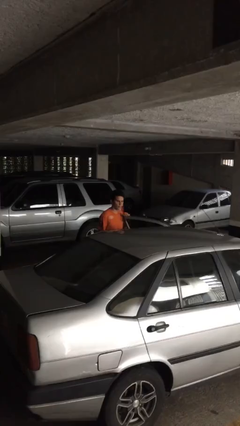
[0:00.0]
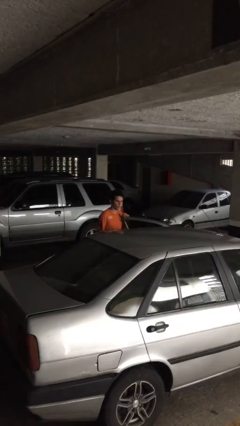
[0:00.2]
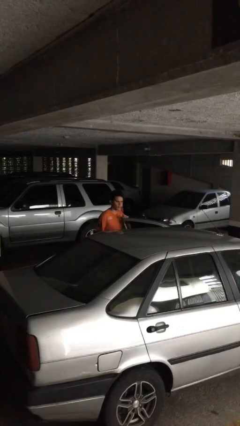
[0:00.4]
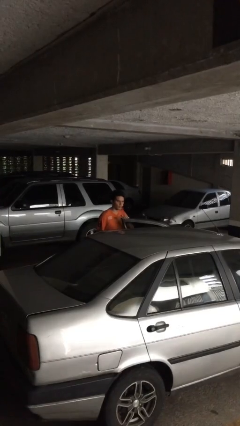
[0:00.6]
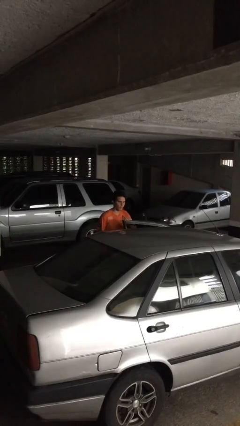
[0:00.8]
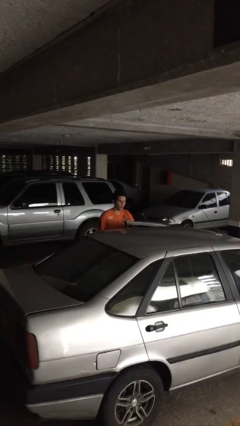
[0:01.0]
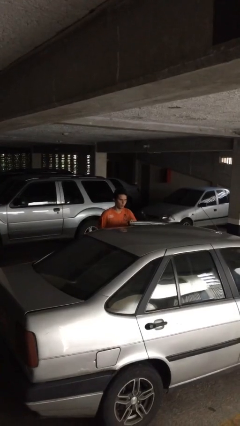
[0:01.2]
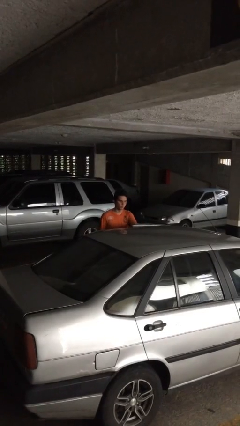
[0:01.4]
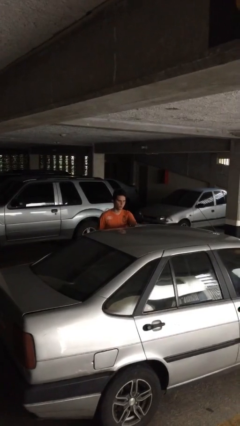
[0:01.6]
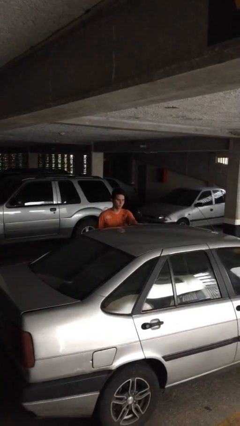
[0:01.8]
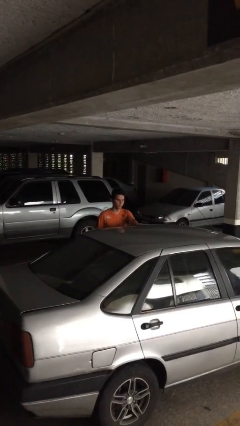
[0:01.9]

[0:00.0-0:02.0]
person closes car door

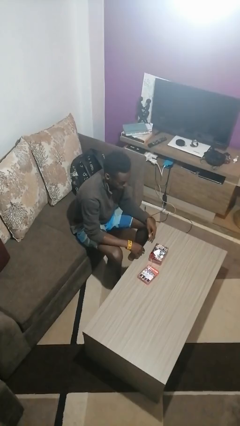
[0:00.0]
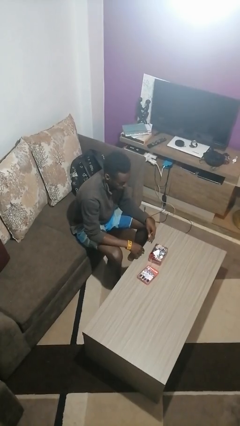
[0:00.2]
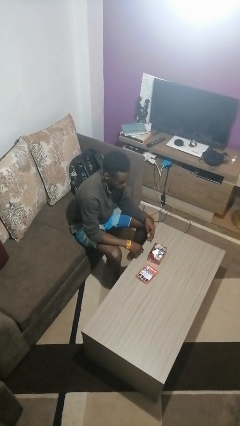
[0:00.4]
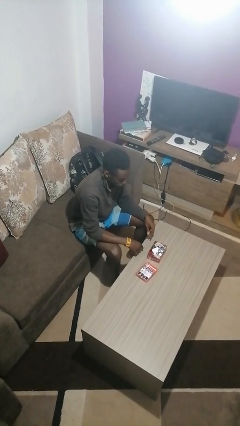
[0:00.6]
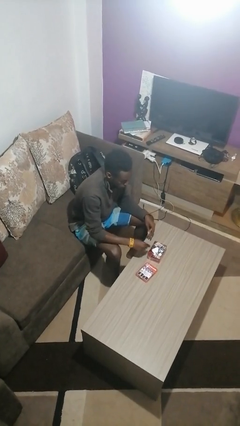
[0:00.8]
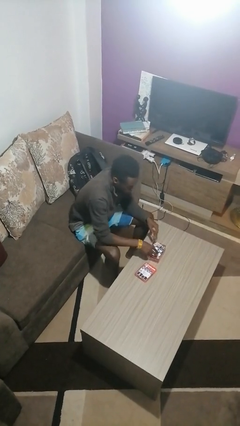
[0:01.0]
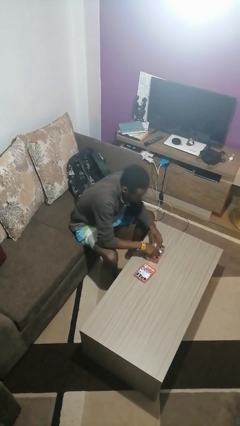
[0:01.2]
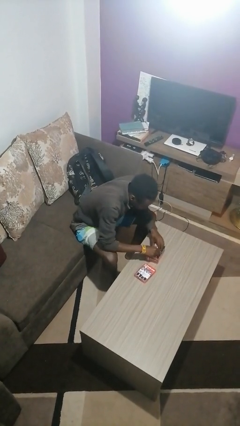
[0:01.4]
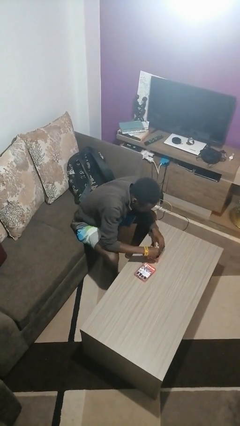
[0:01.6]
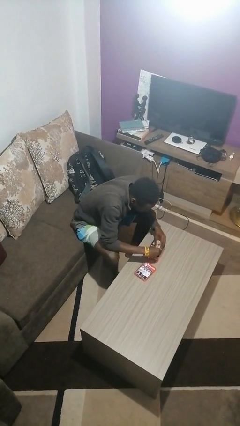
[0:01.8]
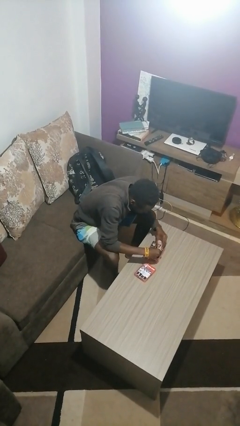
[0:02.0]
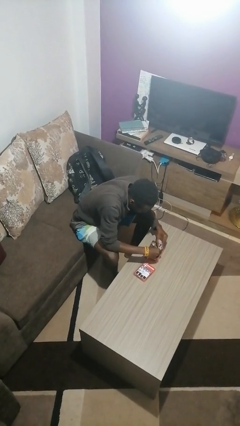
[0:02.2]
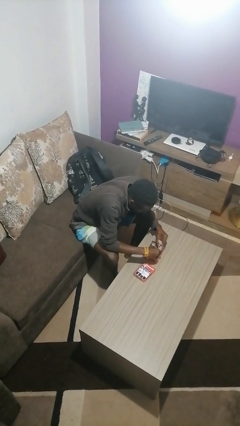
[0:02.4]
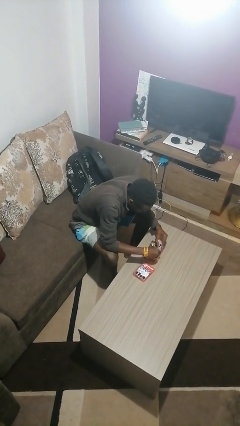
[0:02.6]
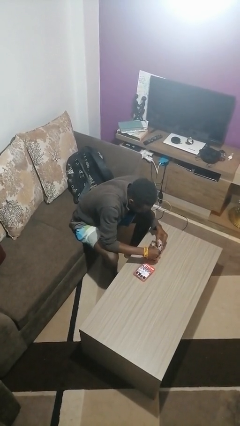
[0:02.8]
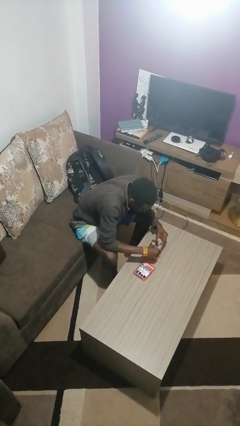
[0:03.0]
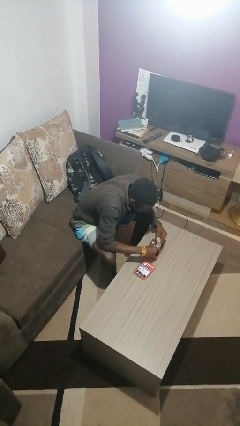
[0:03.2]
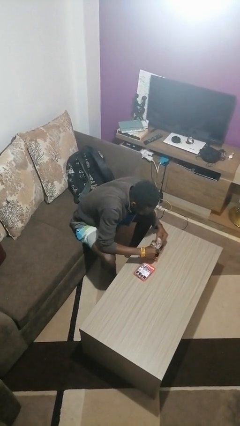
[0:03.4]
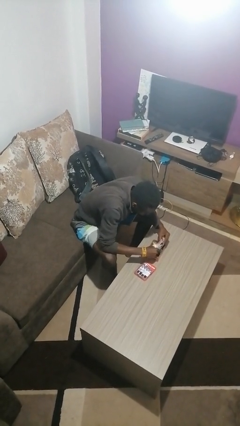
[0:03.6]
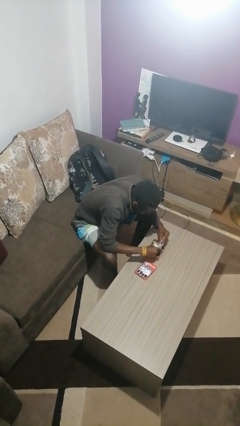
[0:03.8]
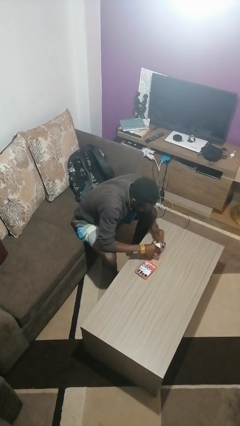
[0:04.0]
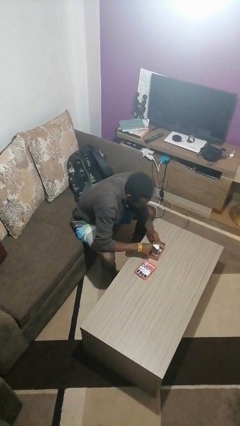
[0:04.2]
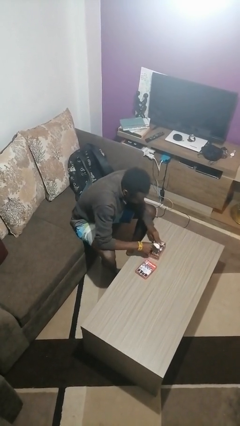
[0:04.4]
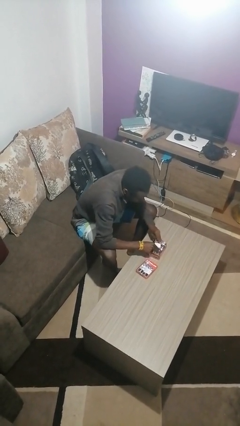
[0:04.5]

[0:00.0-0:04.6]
person searches jewelry box

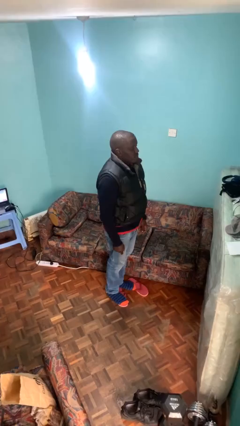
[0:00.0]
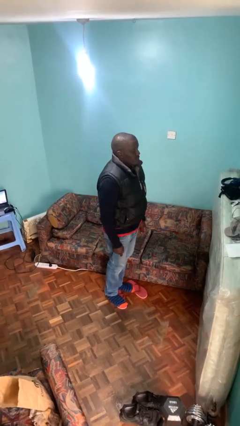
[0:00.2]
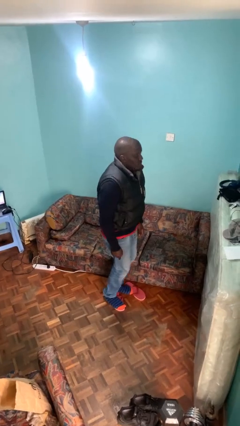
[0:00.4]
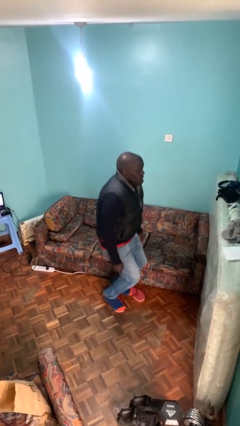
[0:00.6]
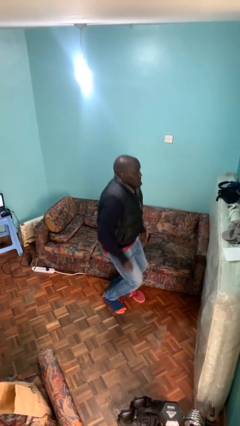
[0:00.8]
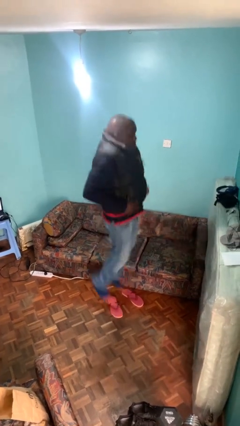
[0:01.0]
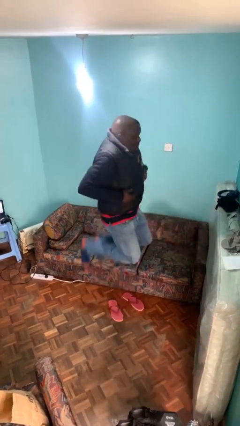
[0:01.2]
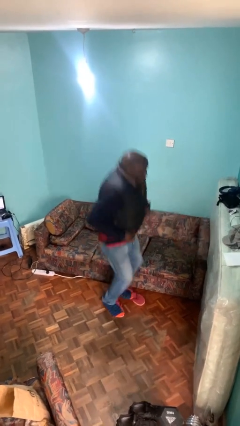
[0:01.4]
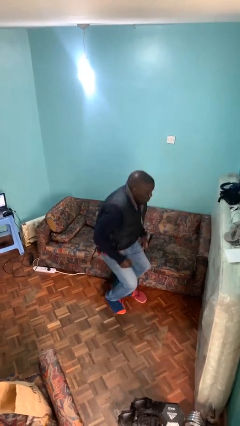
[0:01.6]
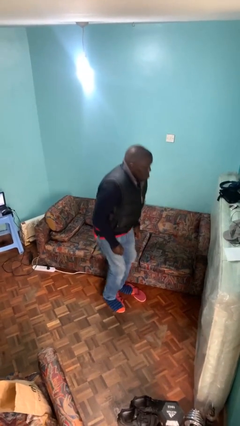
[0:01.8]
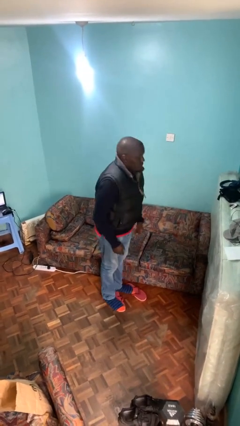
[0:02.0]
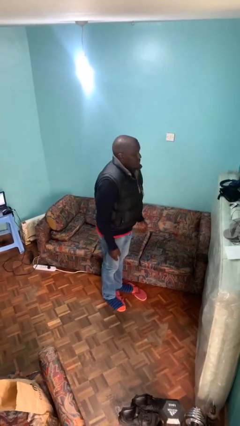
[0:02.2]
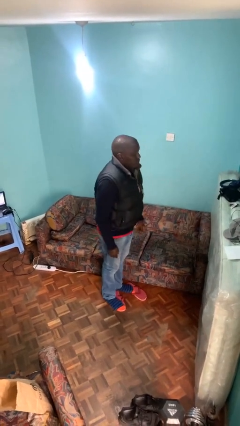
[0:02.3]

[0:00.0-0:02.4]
person jumps

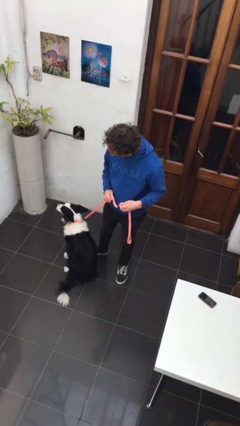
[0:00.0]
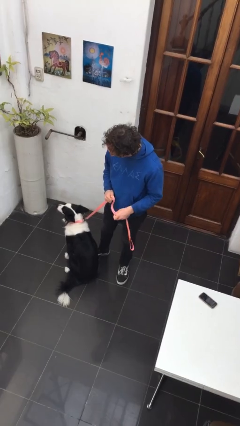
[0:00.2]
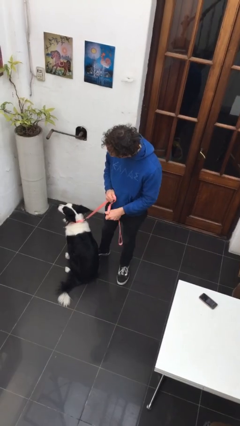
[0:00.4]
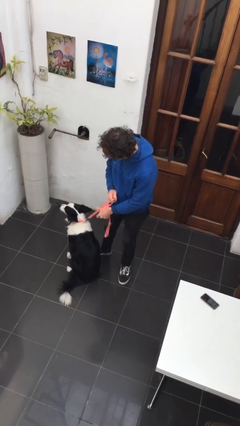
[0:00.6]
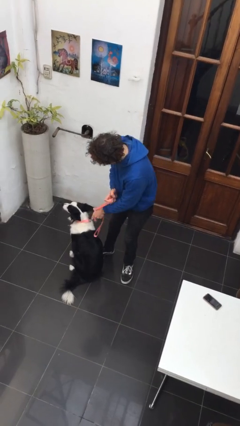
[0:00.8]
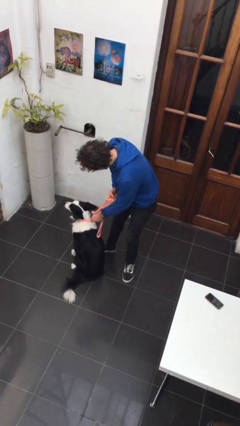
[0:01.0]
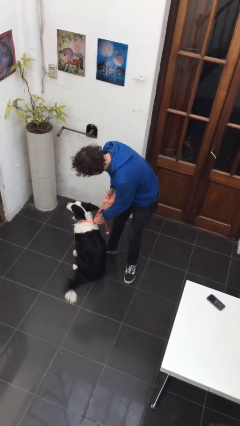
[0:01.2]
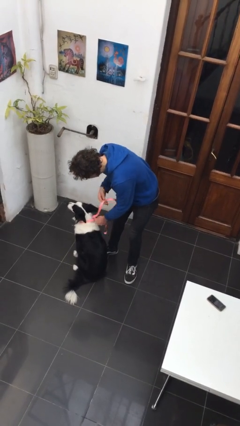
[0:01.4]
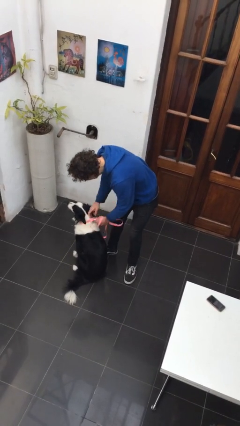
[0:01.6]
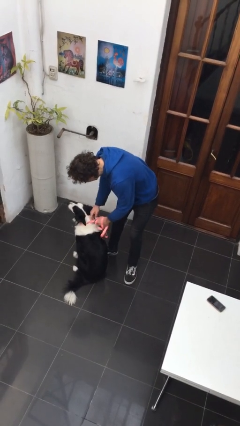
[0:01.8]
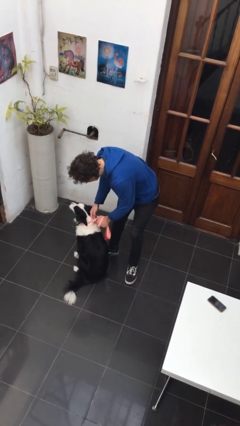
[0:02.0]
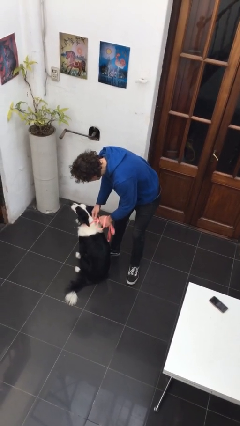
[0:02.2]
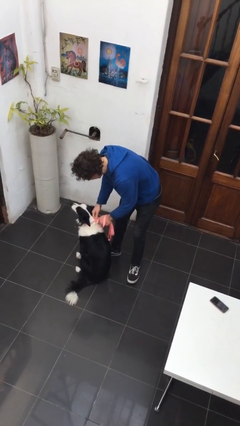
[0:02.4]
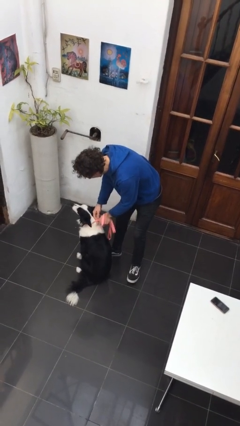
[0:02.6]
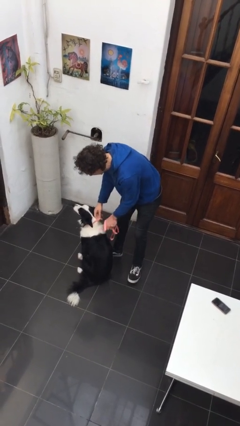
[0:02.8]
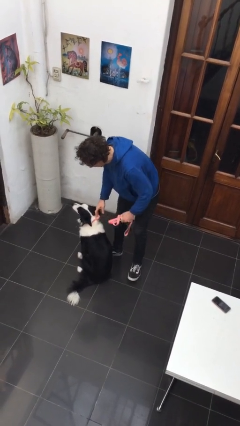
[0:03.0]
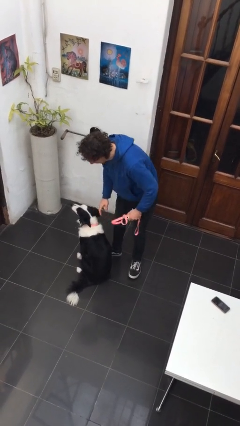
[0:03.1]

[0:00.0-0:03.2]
person unattaches leash from dog

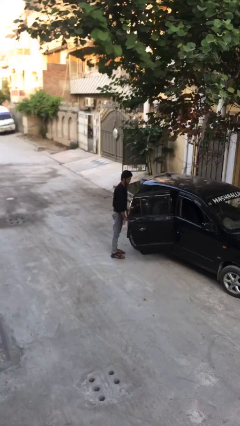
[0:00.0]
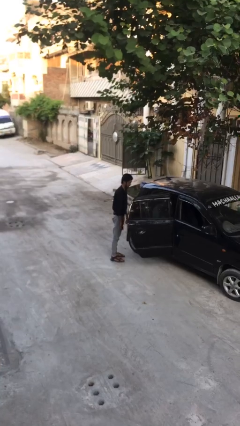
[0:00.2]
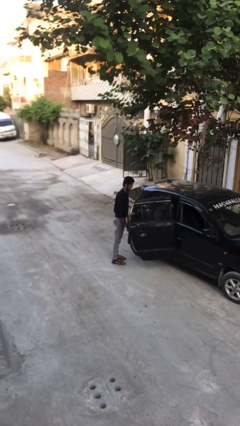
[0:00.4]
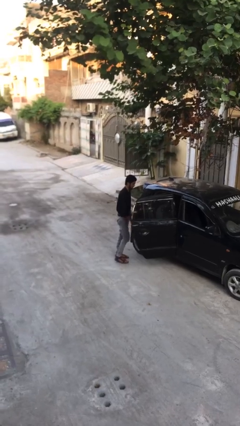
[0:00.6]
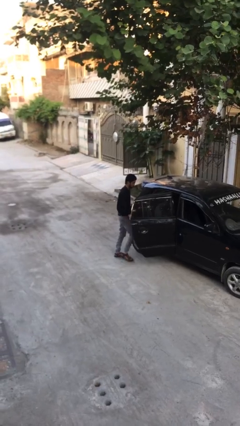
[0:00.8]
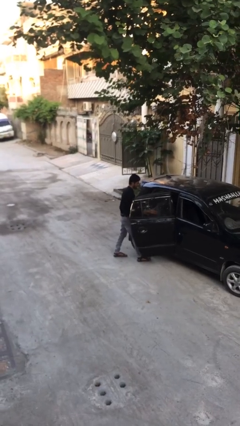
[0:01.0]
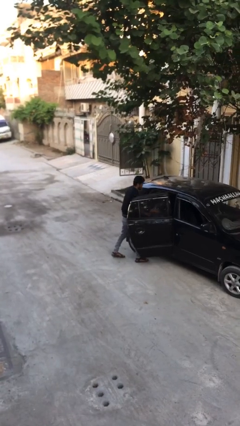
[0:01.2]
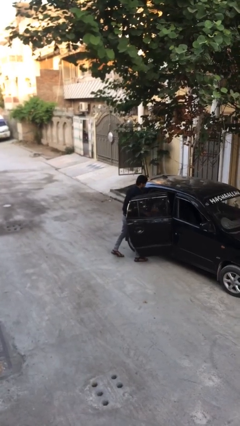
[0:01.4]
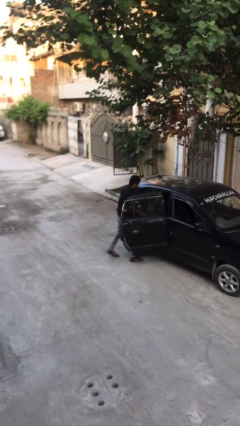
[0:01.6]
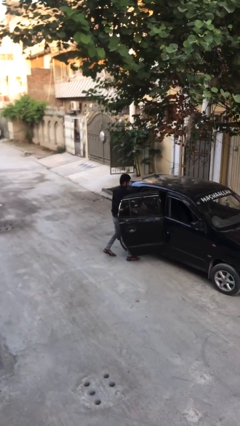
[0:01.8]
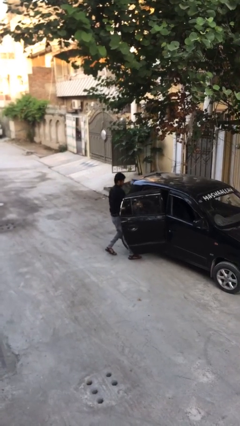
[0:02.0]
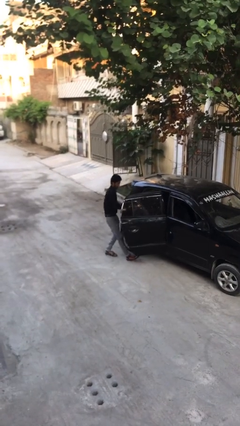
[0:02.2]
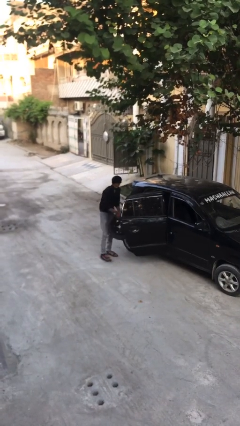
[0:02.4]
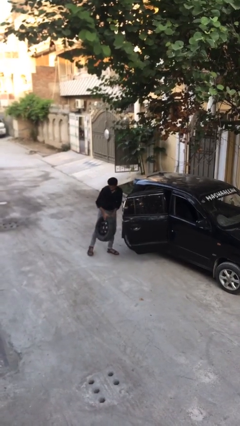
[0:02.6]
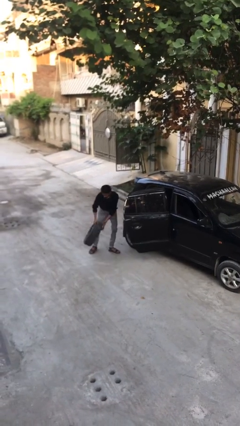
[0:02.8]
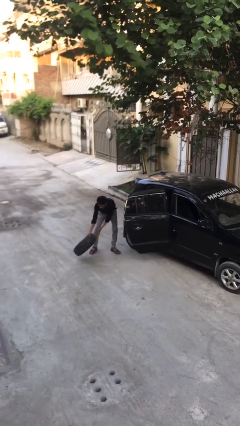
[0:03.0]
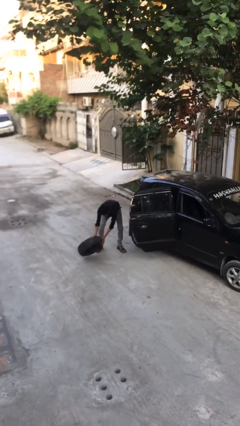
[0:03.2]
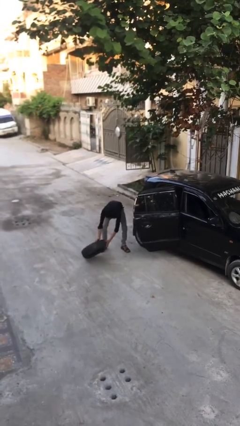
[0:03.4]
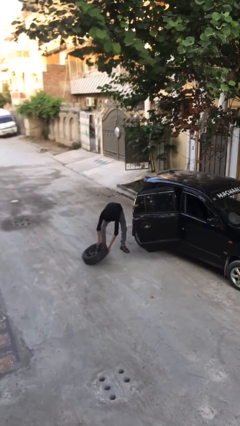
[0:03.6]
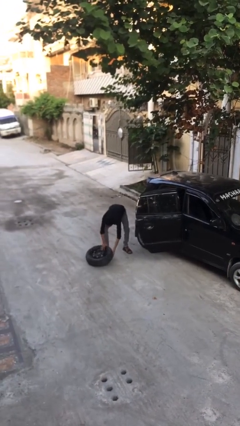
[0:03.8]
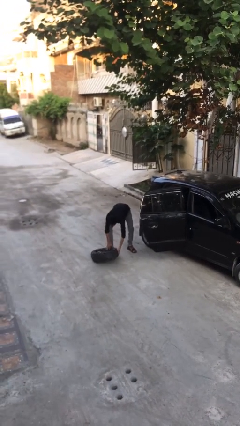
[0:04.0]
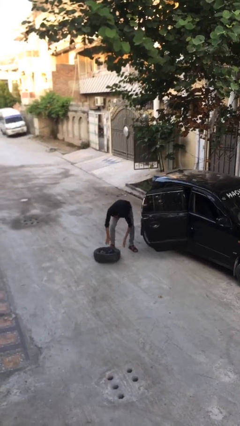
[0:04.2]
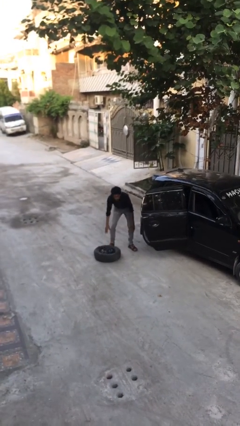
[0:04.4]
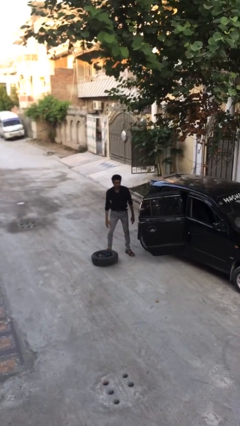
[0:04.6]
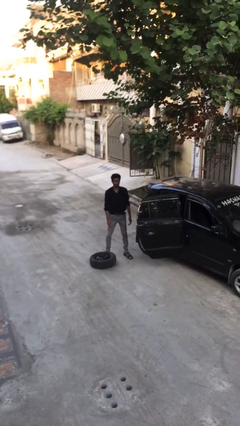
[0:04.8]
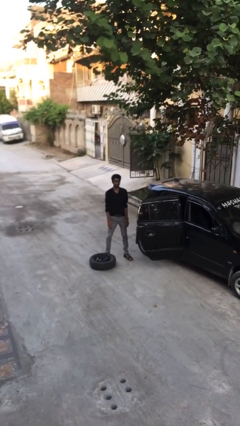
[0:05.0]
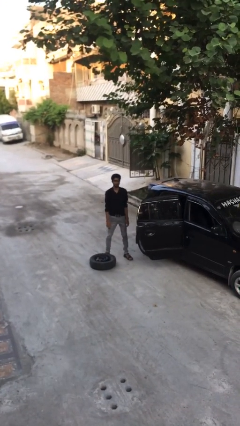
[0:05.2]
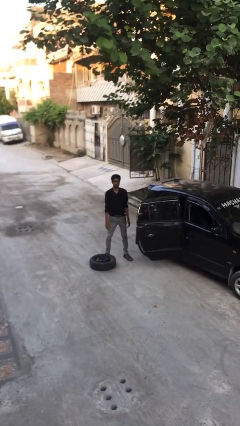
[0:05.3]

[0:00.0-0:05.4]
person unloads car

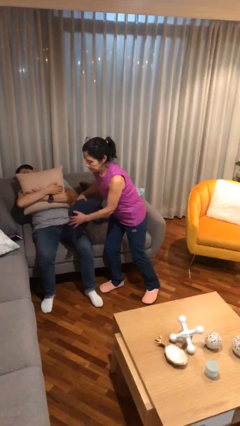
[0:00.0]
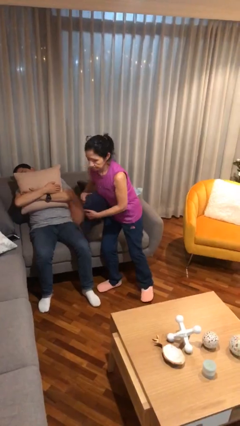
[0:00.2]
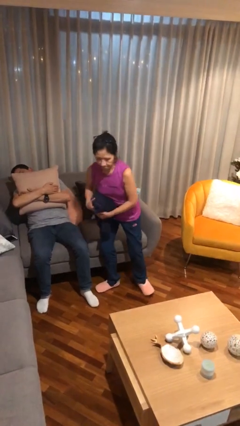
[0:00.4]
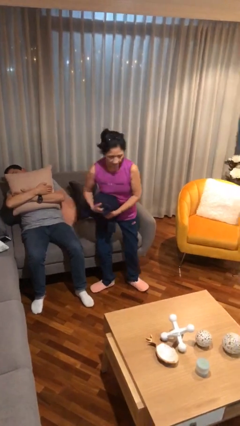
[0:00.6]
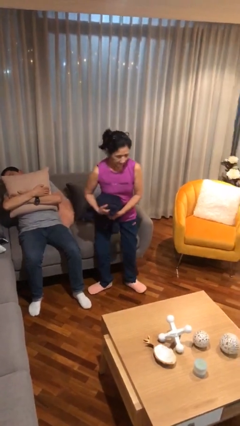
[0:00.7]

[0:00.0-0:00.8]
person steals object from person
